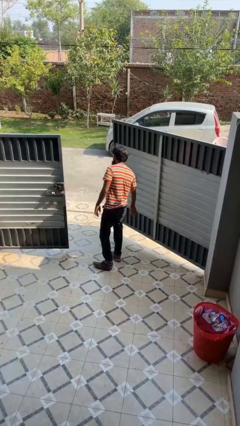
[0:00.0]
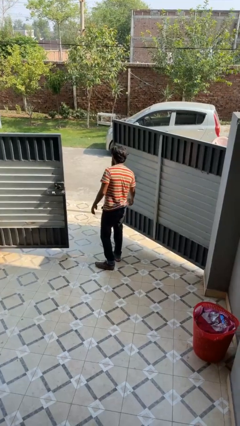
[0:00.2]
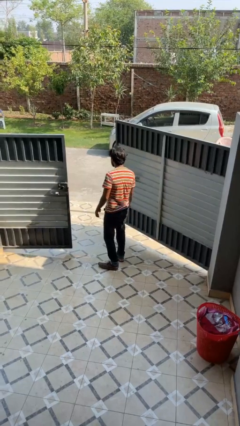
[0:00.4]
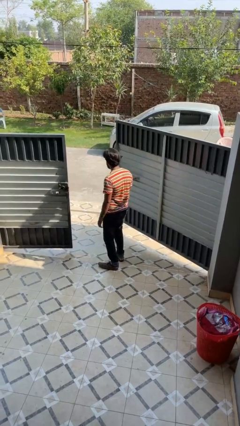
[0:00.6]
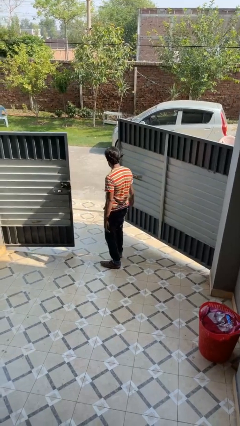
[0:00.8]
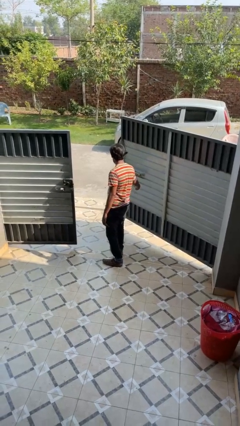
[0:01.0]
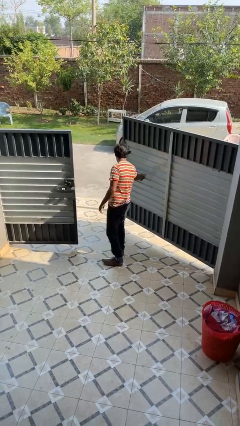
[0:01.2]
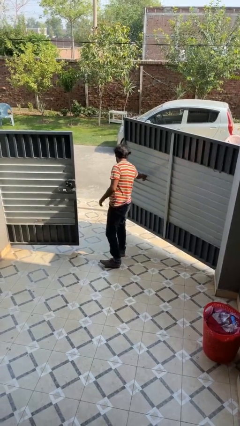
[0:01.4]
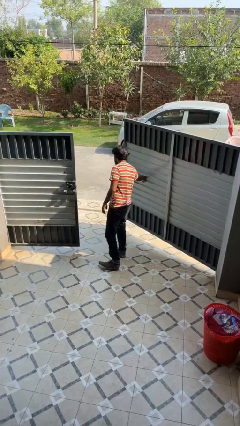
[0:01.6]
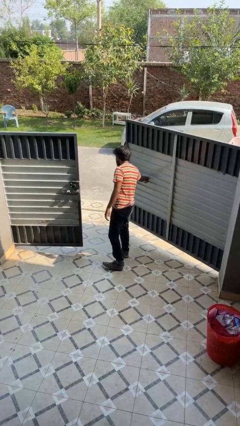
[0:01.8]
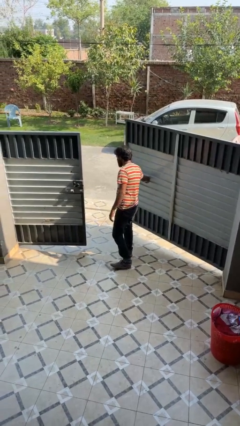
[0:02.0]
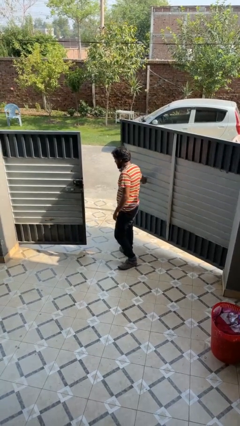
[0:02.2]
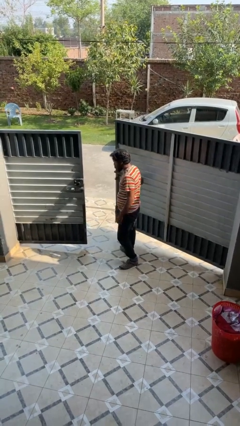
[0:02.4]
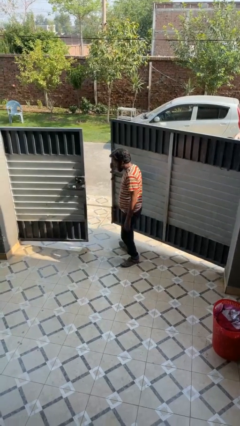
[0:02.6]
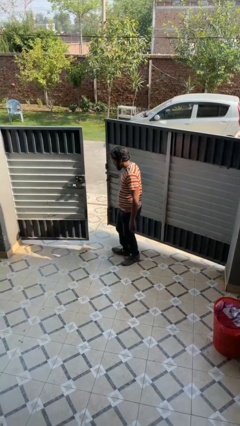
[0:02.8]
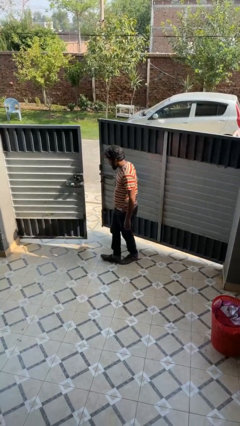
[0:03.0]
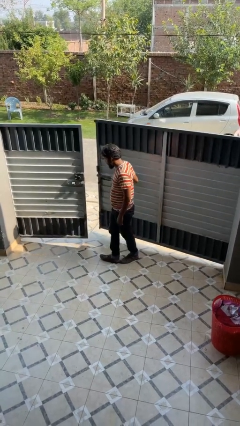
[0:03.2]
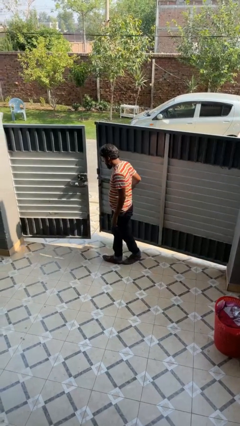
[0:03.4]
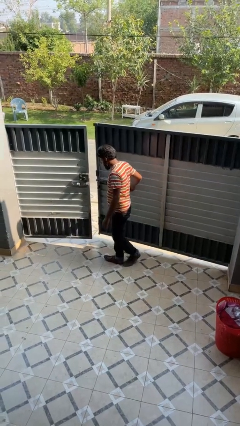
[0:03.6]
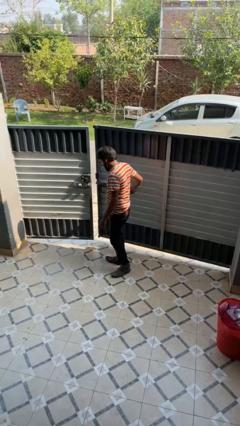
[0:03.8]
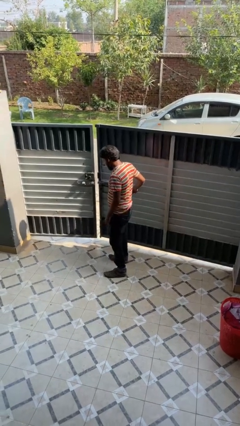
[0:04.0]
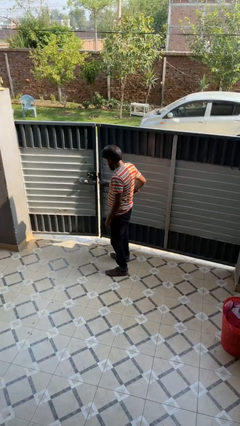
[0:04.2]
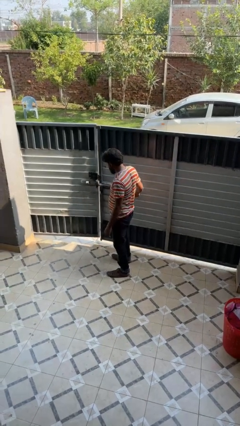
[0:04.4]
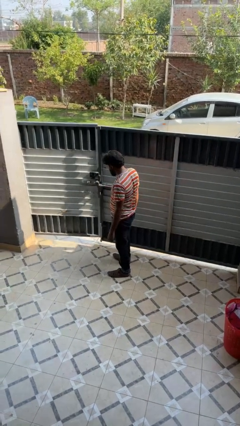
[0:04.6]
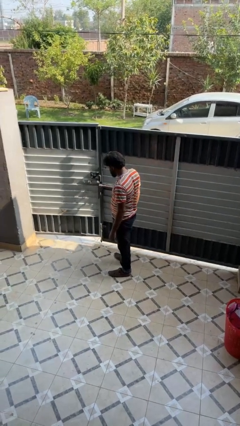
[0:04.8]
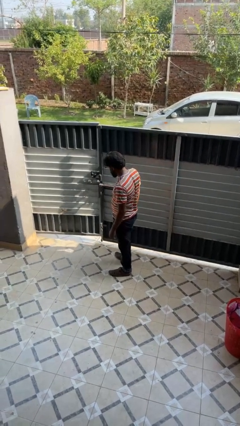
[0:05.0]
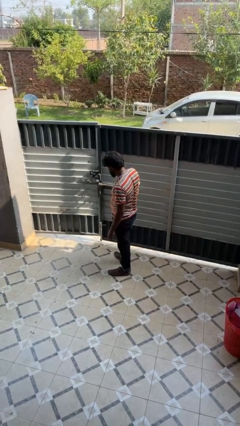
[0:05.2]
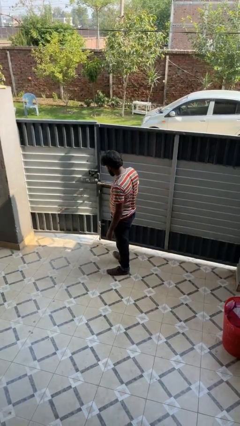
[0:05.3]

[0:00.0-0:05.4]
person closes gate

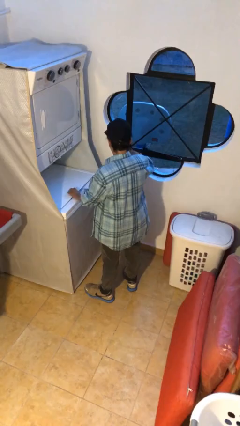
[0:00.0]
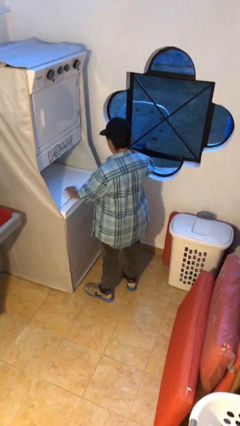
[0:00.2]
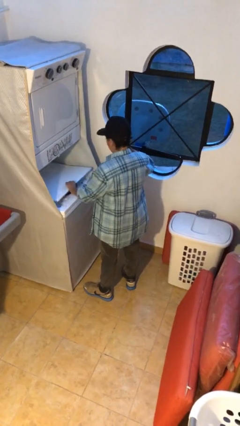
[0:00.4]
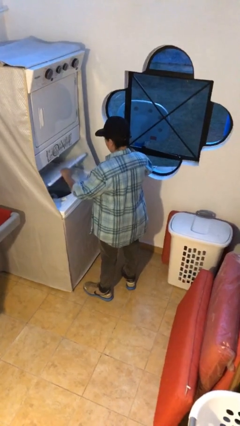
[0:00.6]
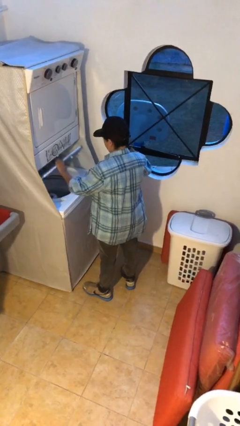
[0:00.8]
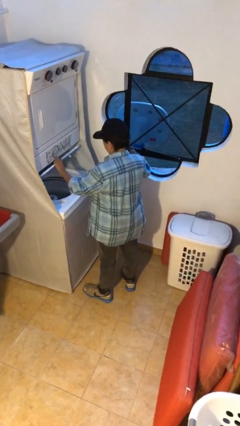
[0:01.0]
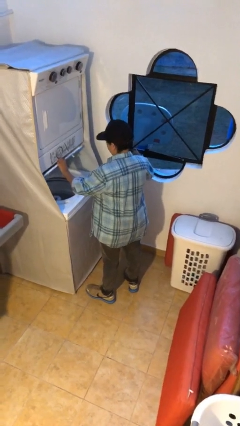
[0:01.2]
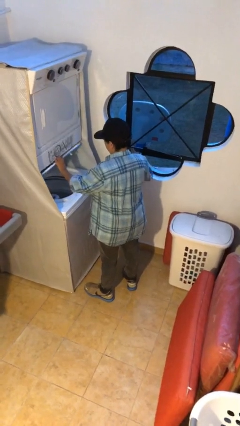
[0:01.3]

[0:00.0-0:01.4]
person opens clothes washer

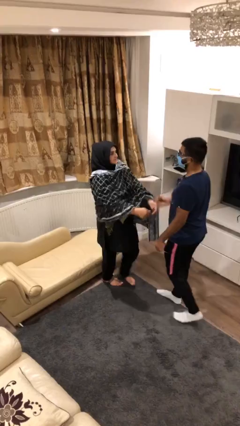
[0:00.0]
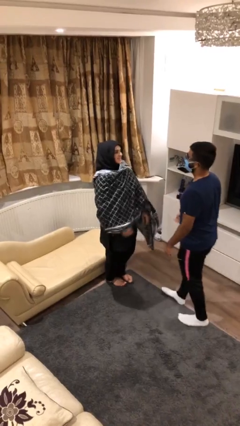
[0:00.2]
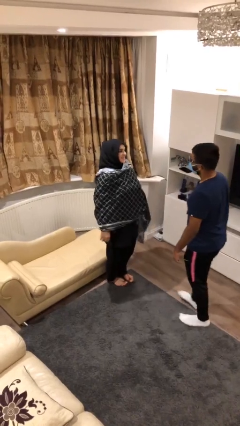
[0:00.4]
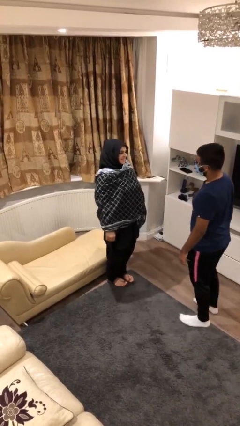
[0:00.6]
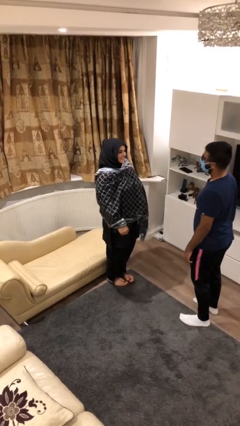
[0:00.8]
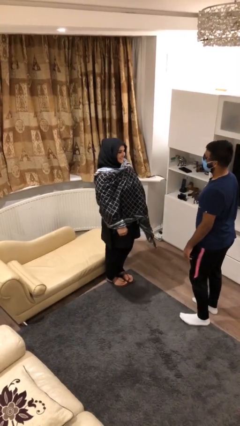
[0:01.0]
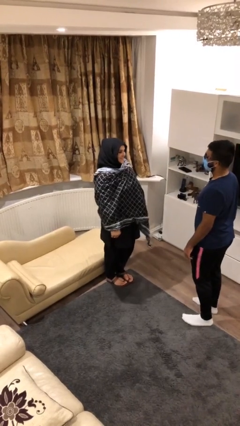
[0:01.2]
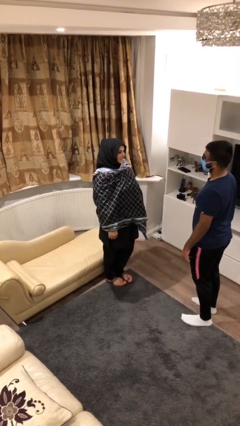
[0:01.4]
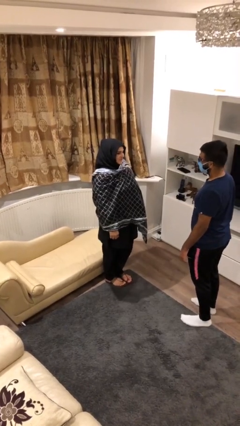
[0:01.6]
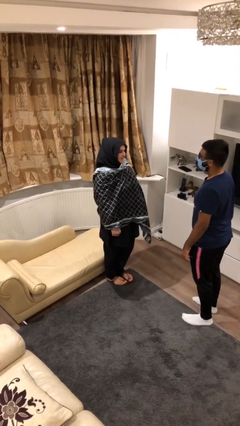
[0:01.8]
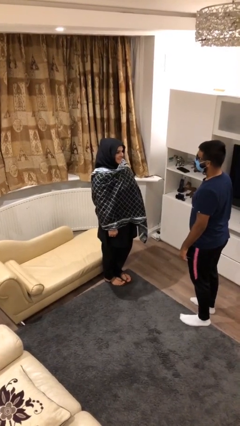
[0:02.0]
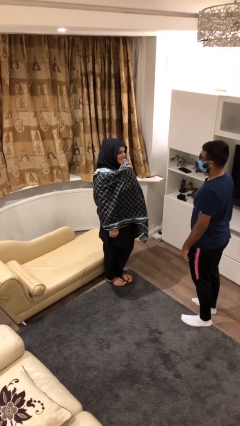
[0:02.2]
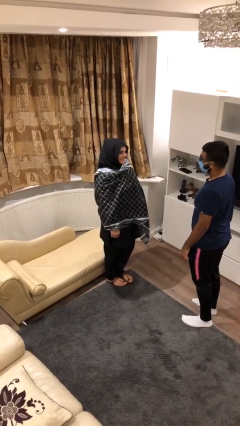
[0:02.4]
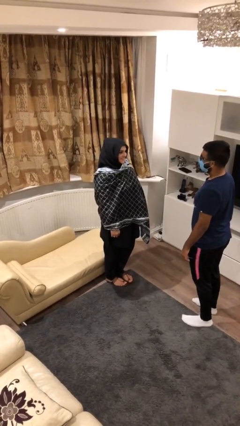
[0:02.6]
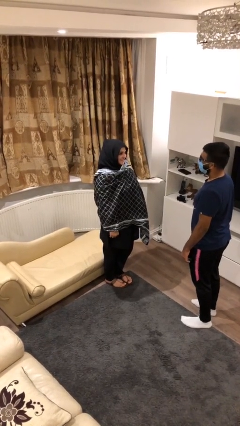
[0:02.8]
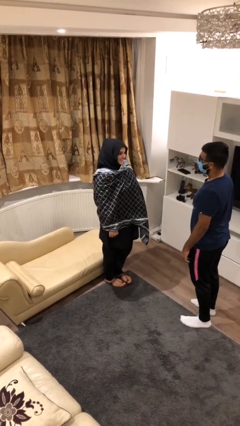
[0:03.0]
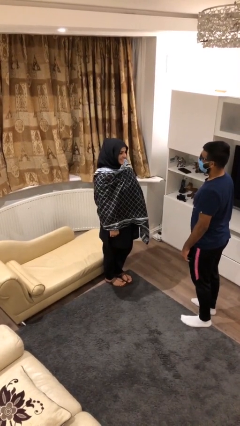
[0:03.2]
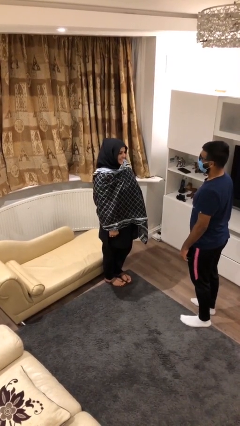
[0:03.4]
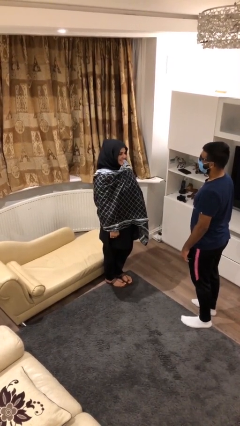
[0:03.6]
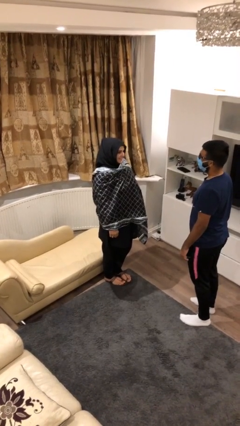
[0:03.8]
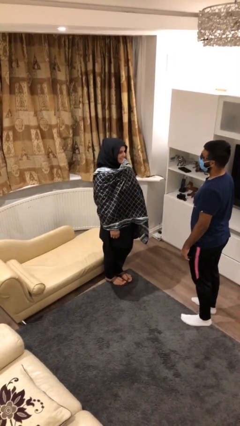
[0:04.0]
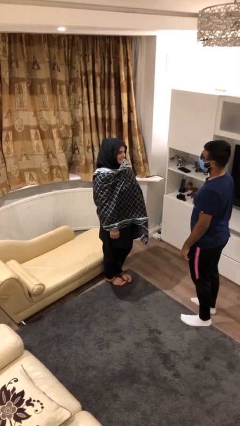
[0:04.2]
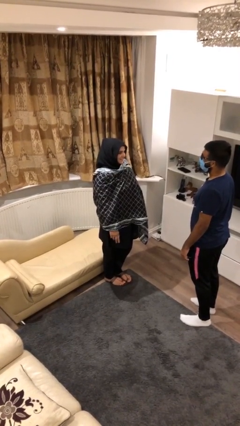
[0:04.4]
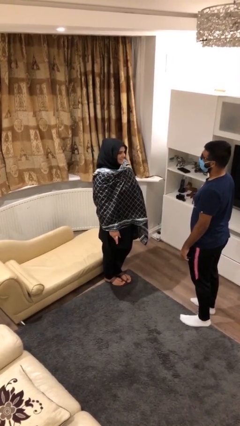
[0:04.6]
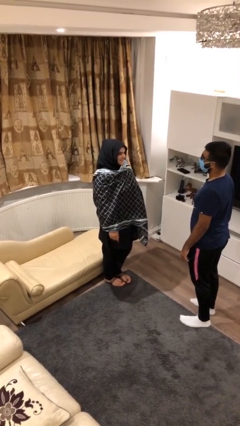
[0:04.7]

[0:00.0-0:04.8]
person talks to person

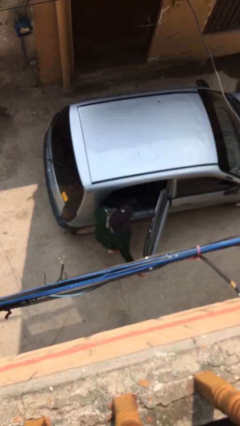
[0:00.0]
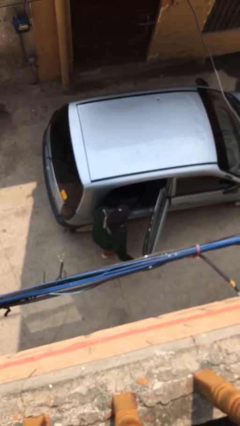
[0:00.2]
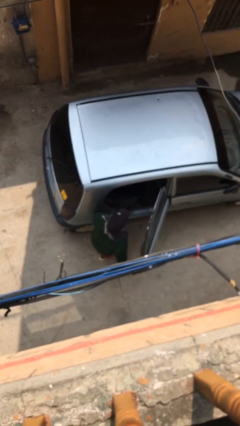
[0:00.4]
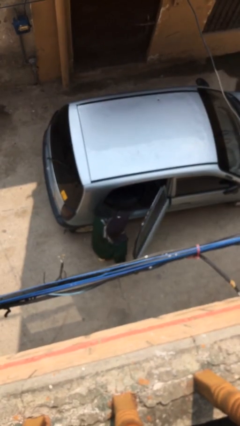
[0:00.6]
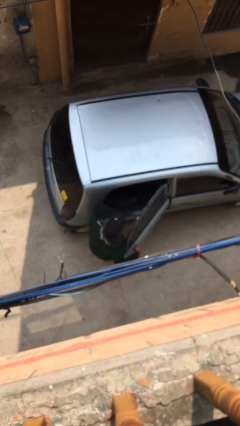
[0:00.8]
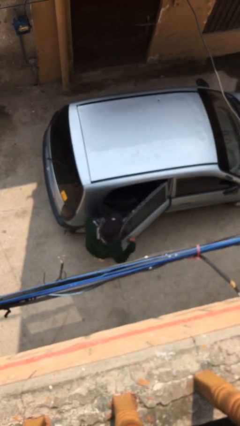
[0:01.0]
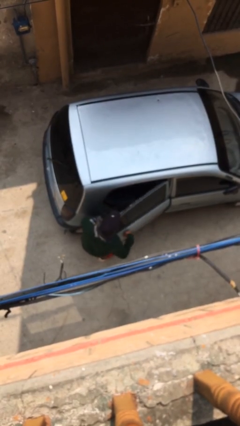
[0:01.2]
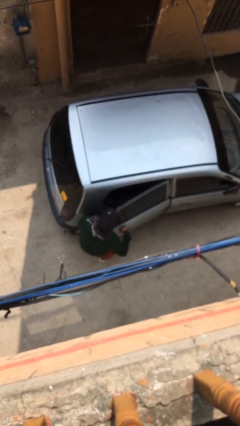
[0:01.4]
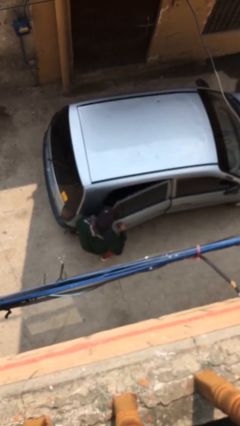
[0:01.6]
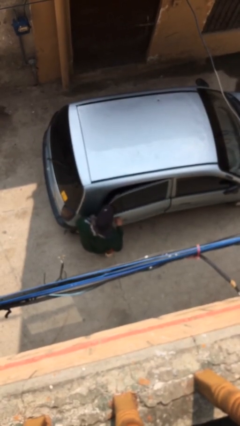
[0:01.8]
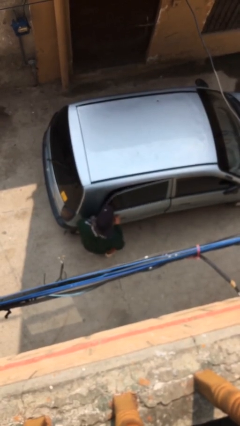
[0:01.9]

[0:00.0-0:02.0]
person closes car door

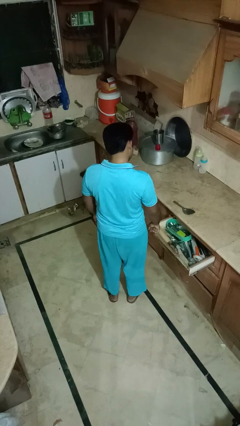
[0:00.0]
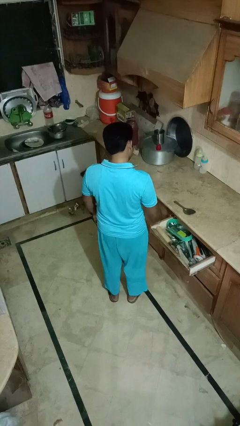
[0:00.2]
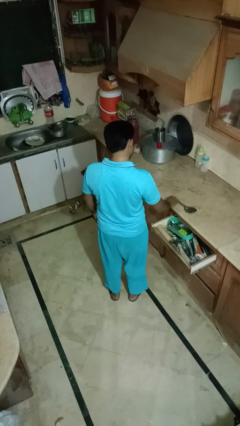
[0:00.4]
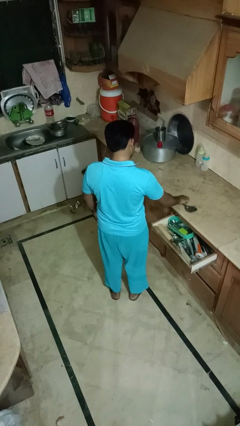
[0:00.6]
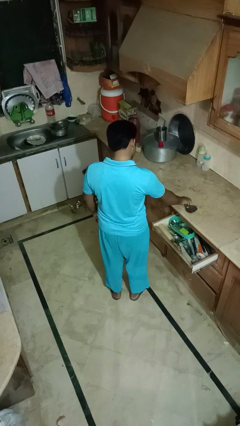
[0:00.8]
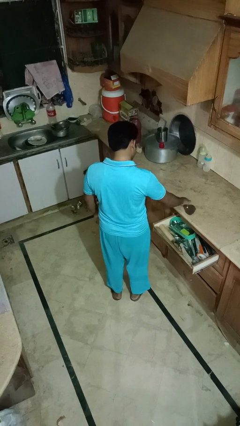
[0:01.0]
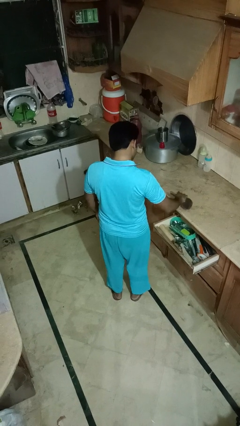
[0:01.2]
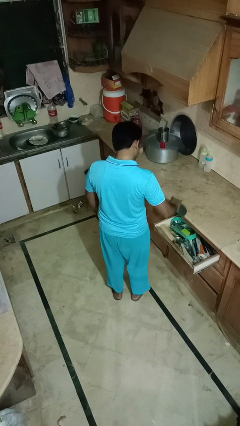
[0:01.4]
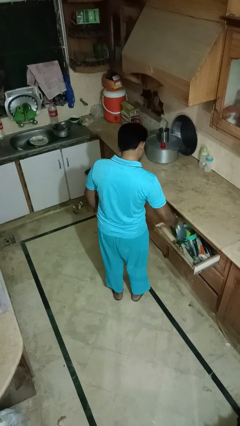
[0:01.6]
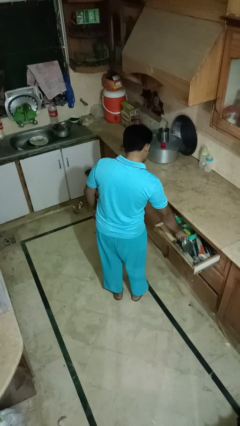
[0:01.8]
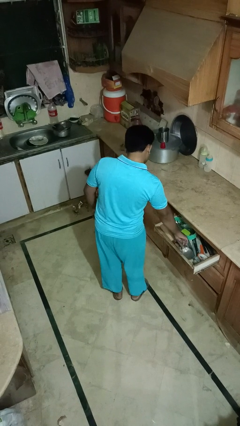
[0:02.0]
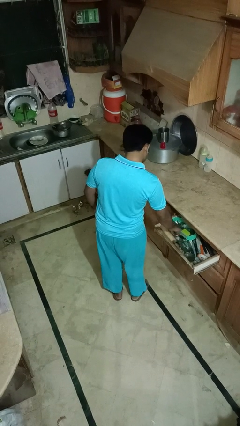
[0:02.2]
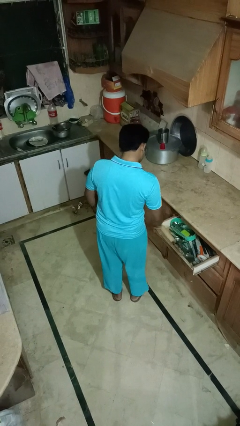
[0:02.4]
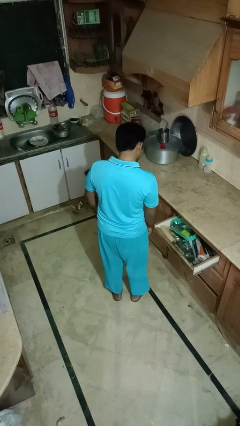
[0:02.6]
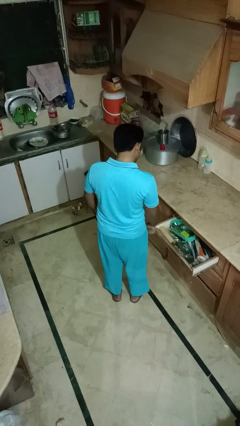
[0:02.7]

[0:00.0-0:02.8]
person puts object into kitchen drawer

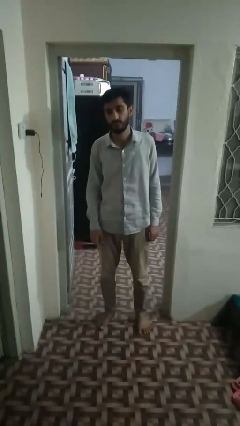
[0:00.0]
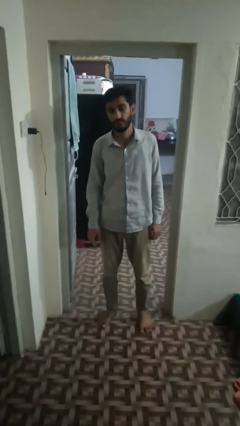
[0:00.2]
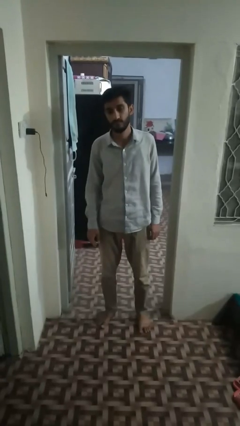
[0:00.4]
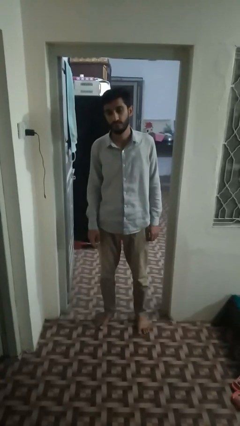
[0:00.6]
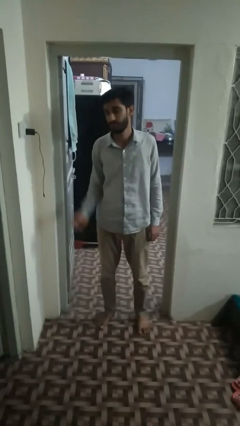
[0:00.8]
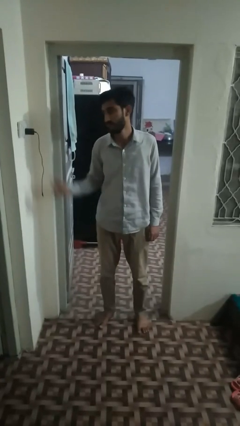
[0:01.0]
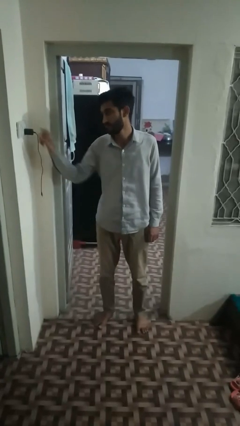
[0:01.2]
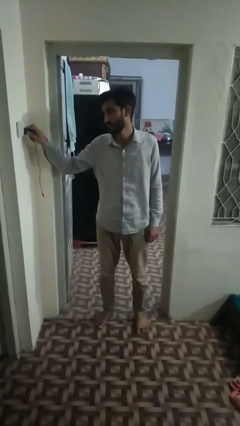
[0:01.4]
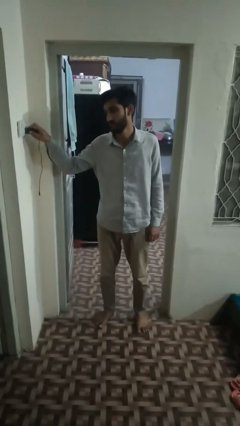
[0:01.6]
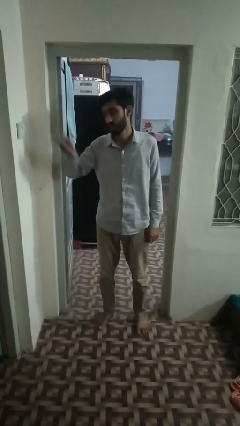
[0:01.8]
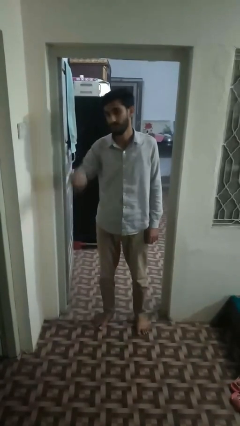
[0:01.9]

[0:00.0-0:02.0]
person unplugs from electrical socket
